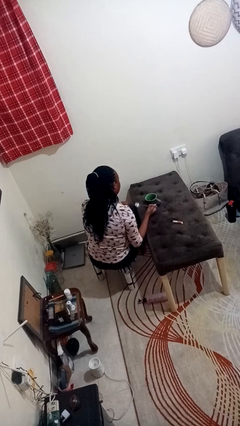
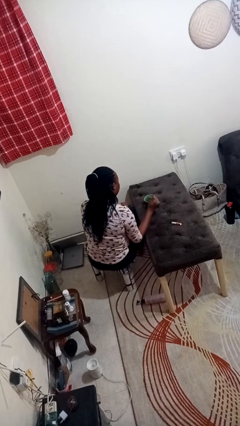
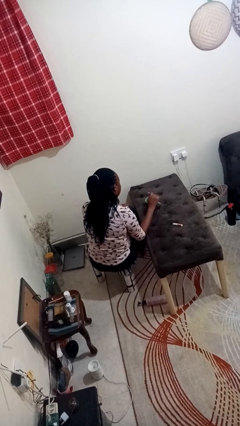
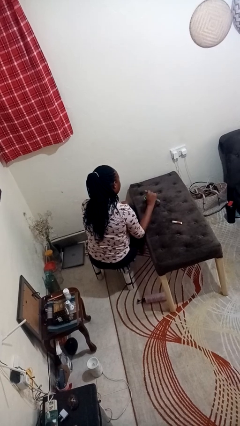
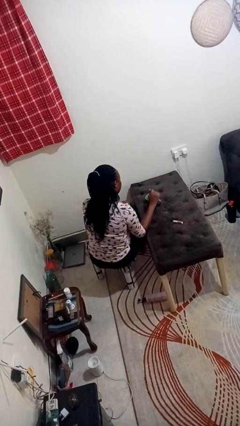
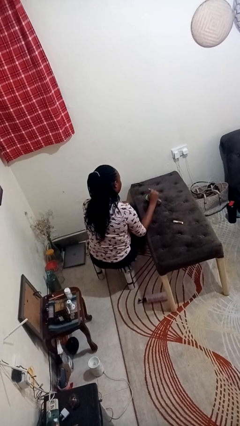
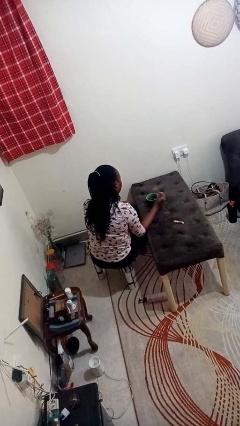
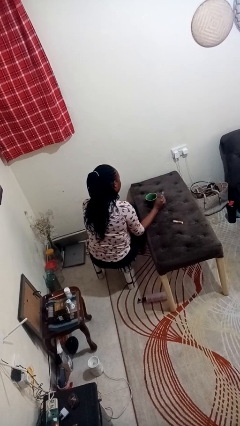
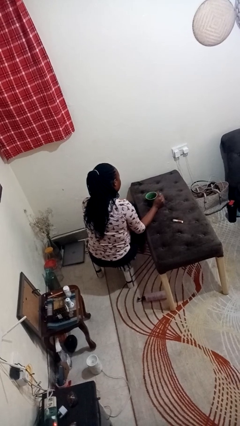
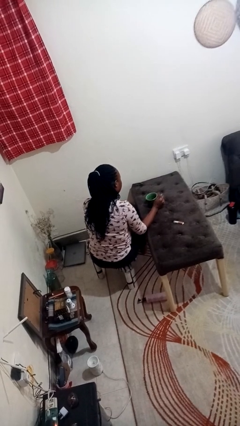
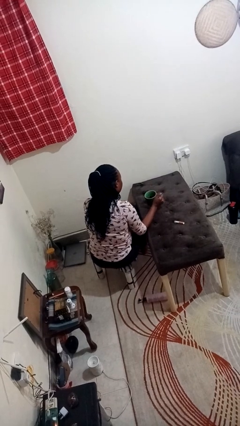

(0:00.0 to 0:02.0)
person stirs mug

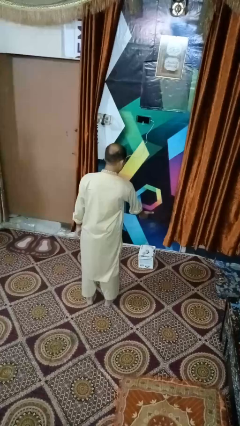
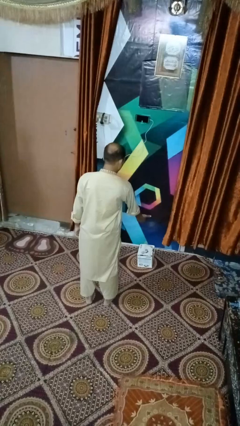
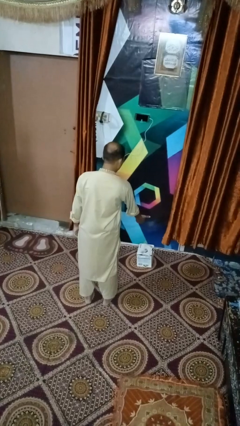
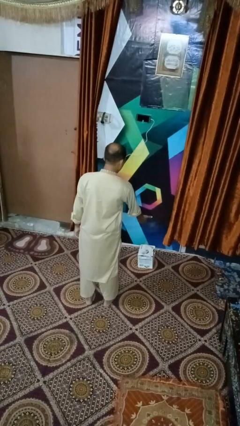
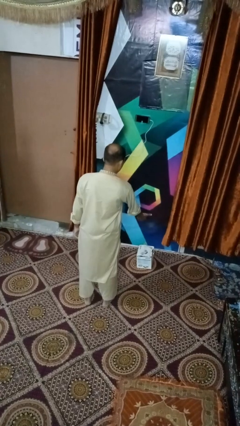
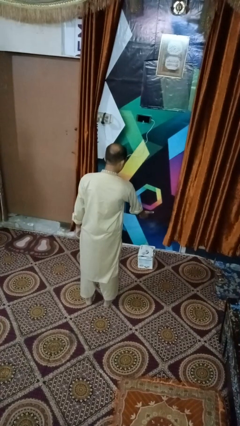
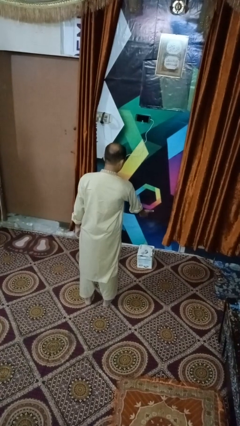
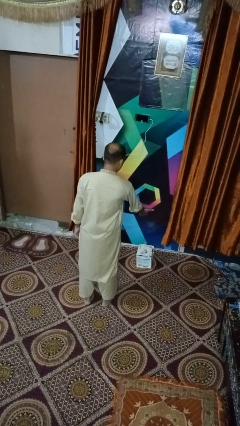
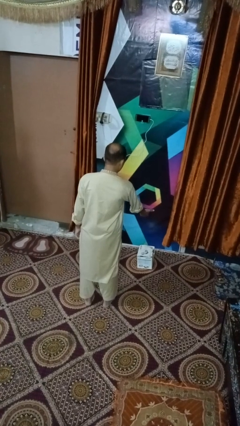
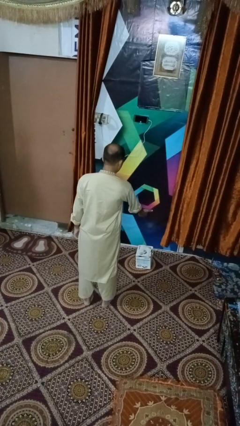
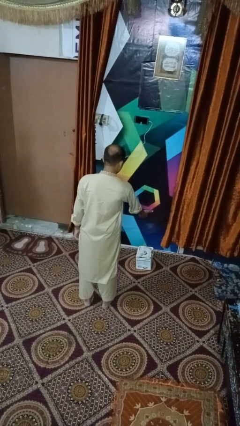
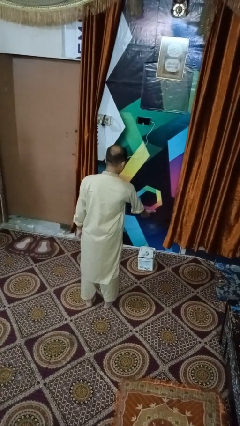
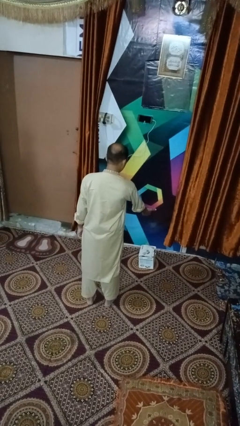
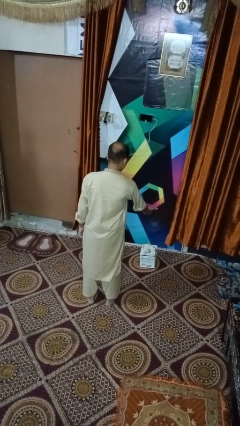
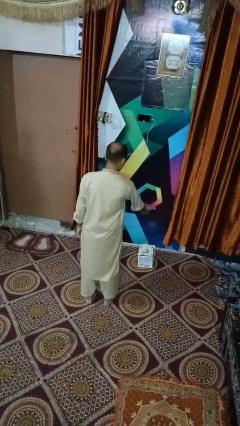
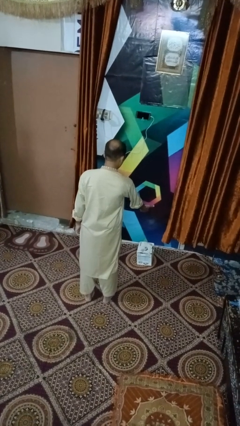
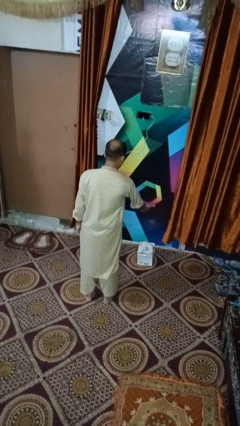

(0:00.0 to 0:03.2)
person waves hand over object

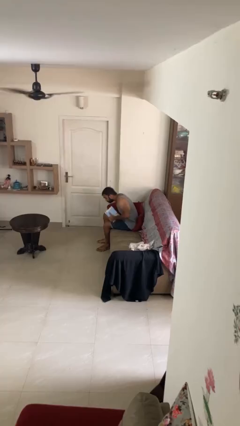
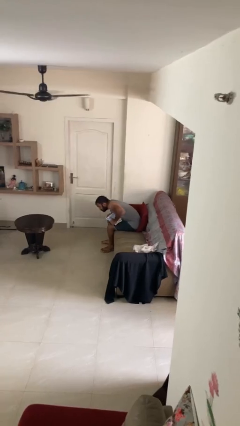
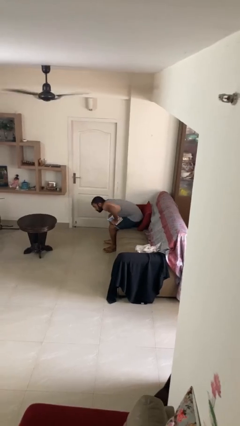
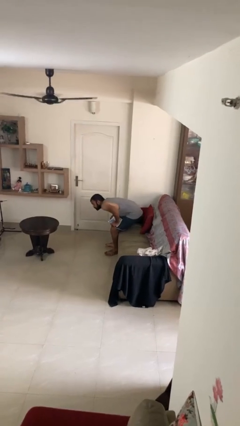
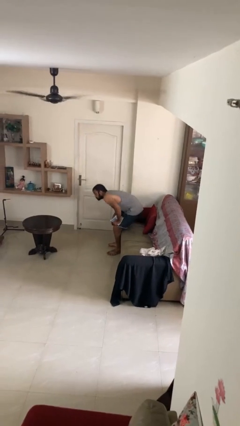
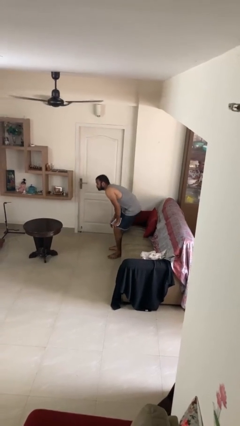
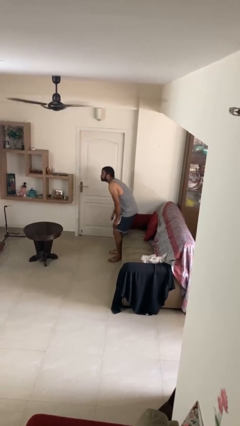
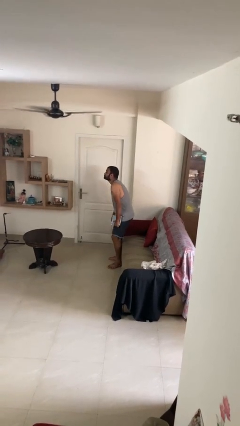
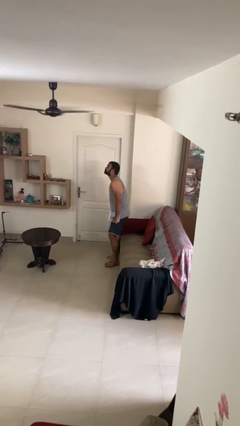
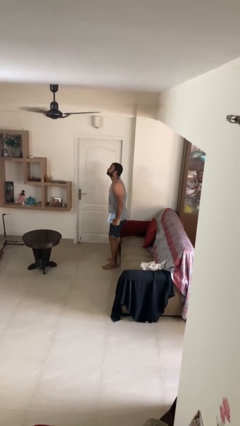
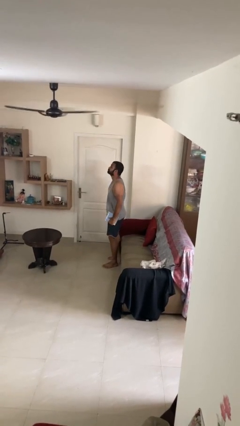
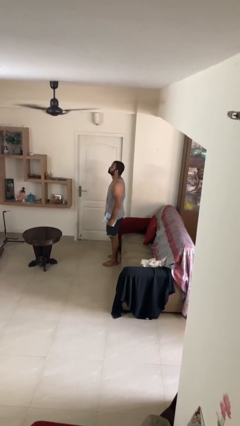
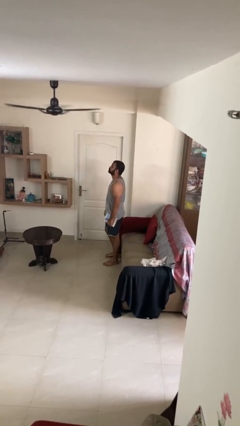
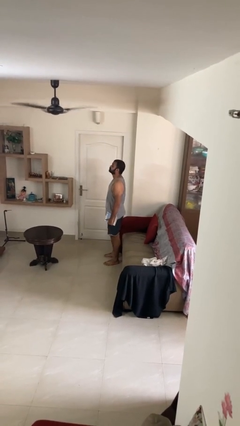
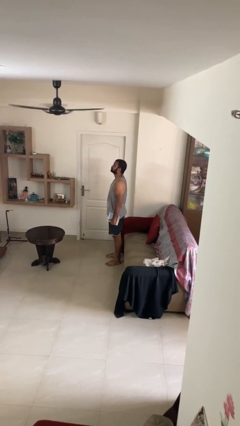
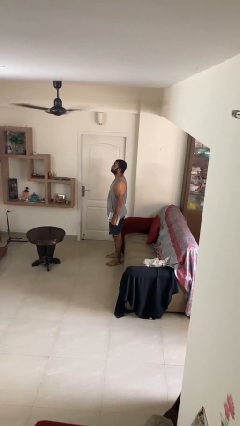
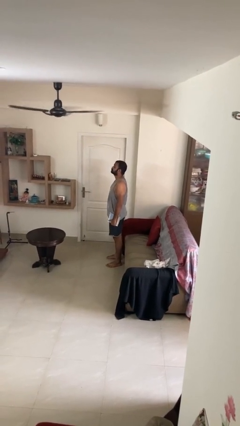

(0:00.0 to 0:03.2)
person stands up

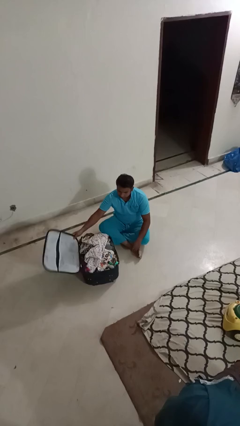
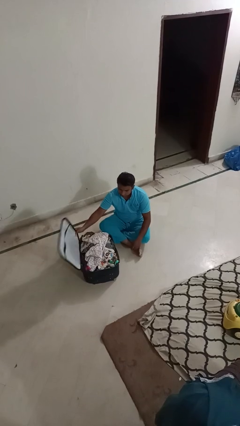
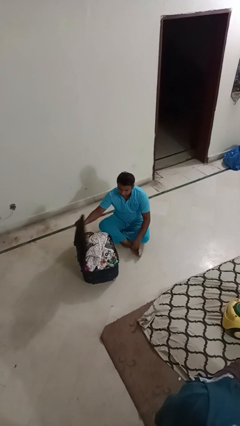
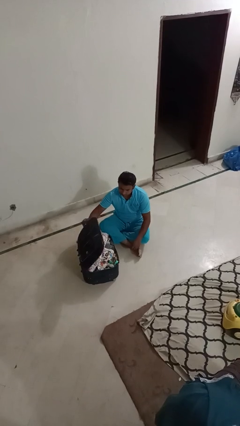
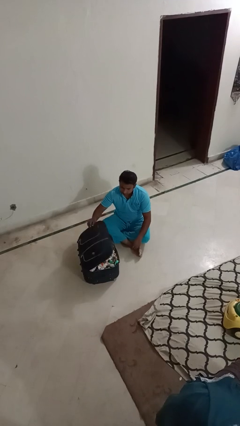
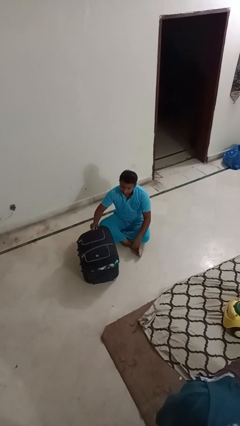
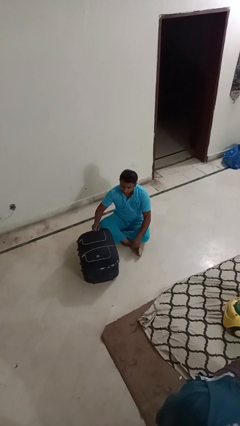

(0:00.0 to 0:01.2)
person closes suitcase

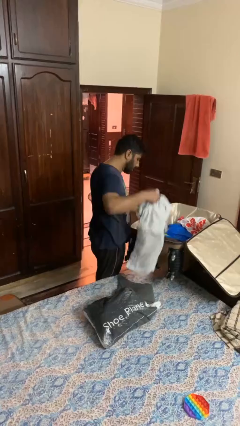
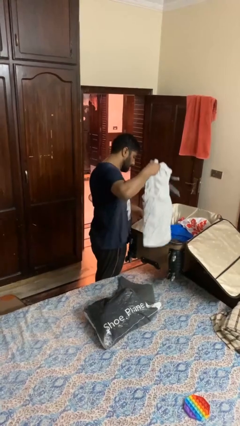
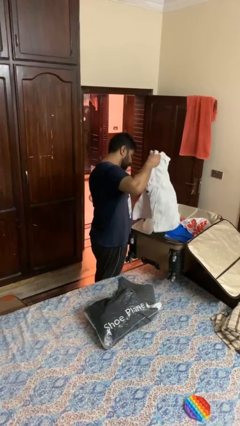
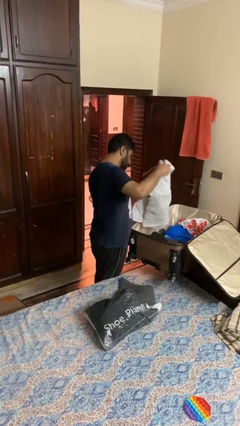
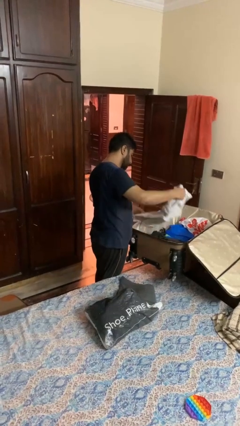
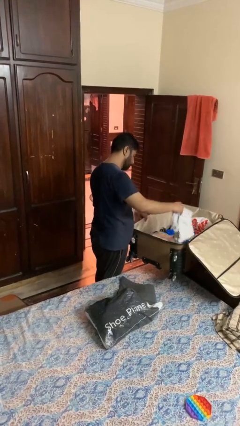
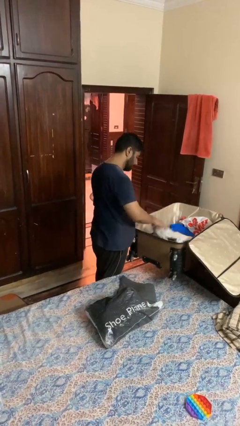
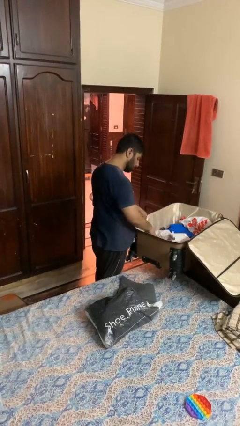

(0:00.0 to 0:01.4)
person loads clothes into suitcase

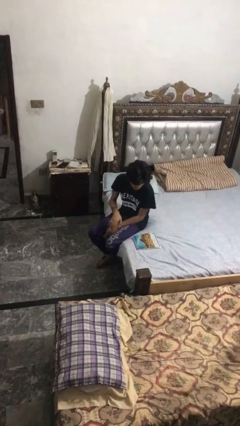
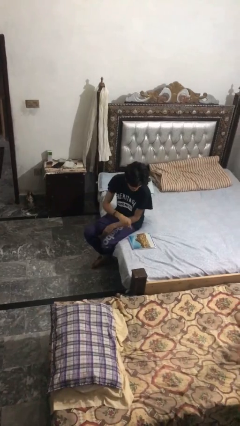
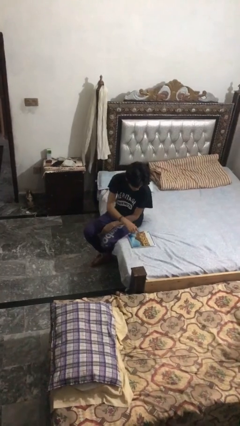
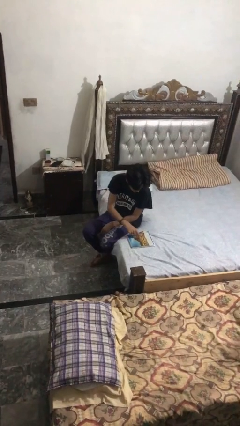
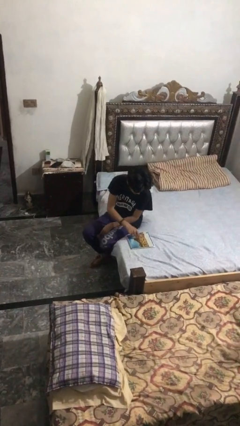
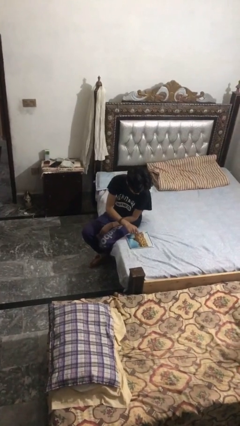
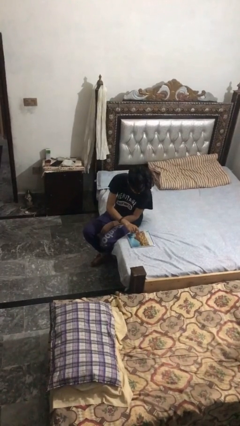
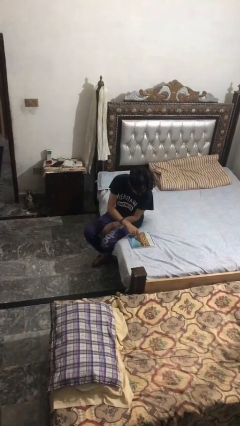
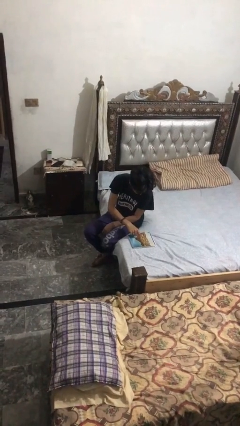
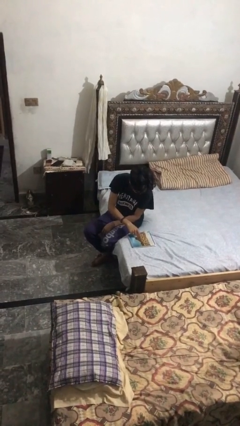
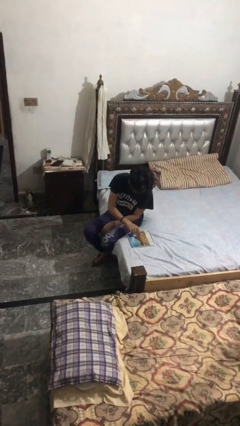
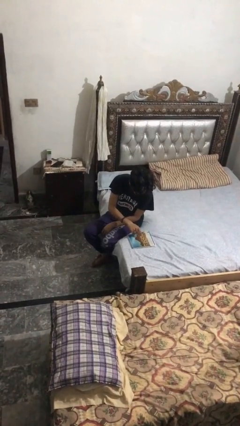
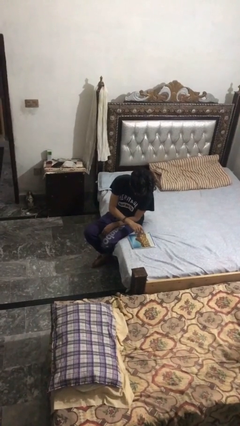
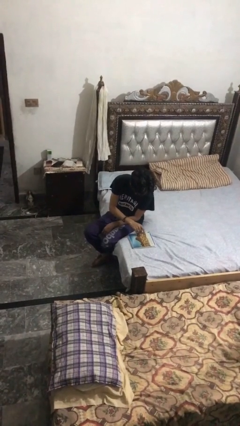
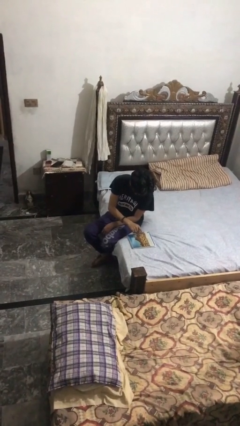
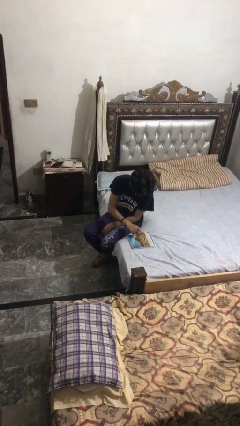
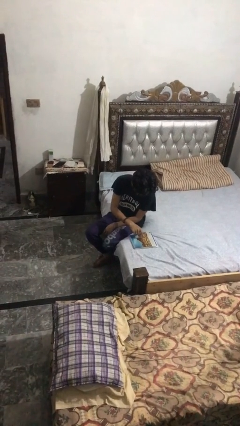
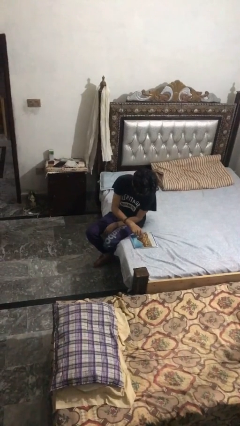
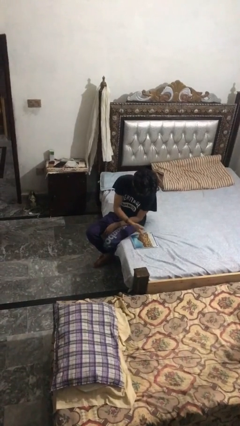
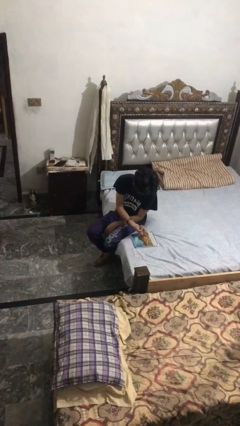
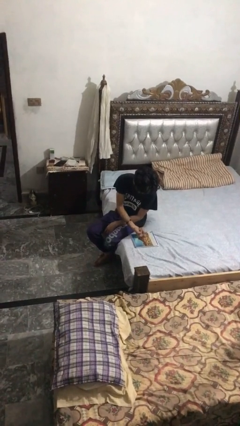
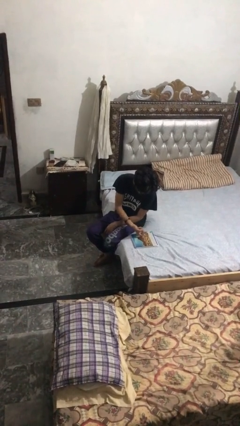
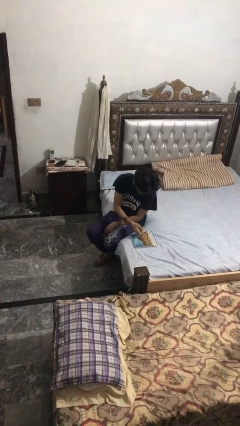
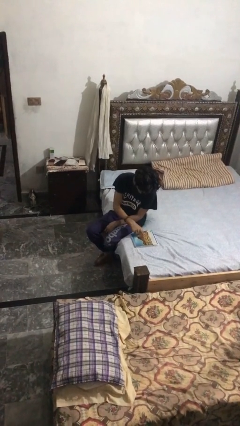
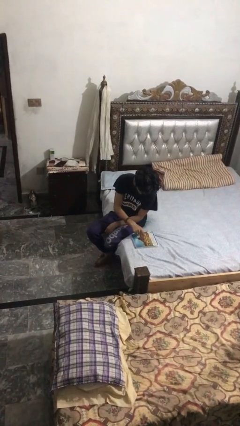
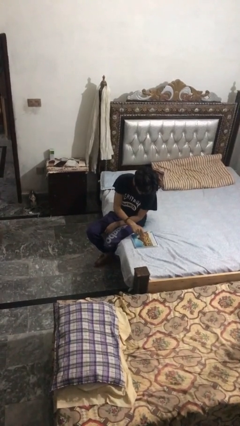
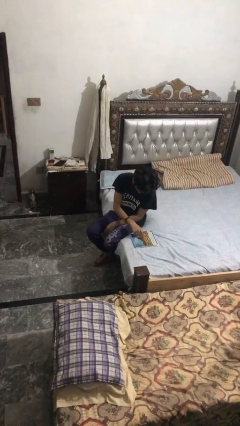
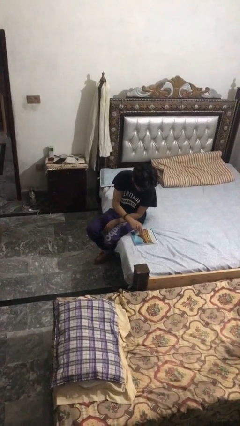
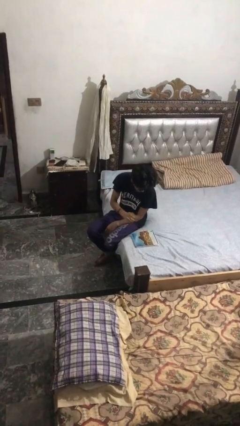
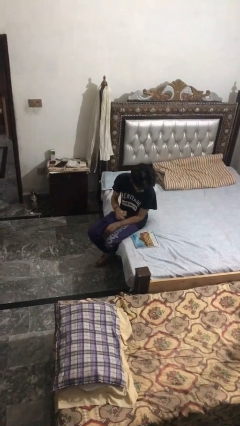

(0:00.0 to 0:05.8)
person taps object with finger

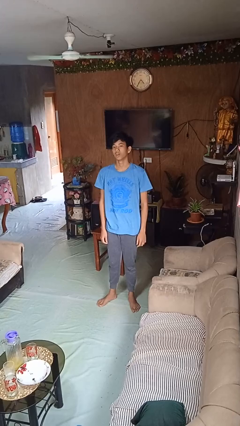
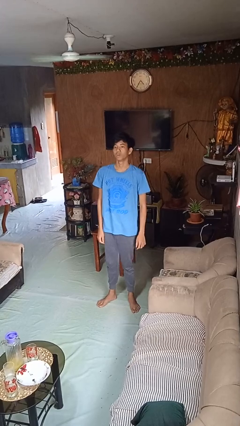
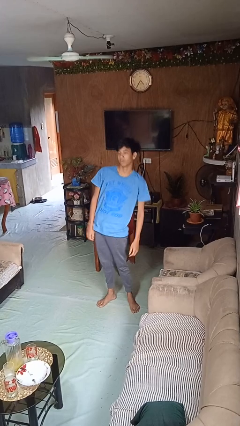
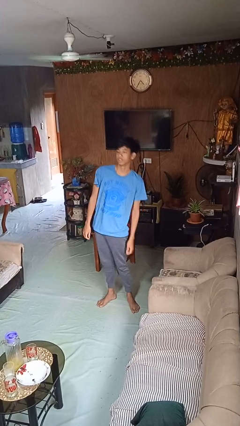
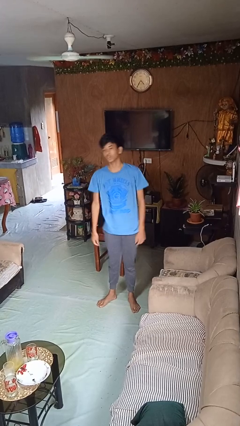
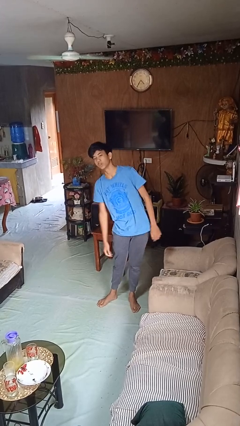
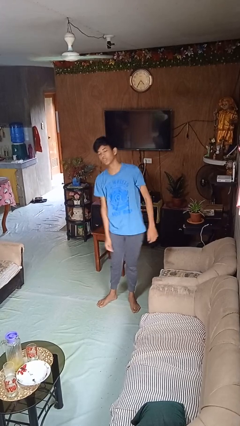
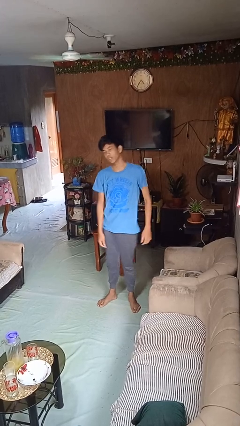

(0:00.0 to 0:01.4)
person dances in place
